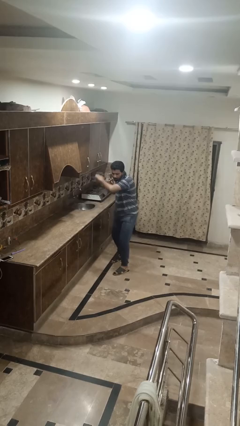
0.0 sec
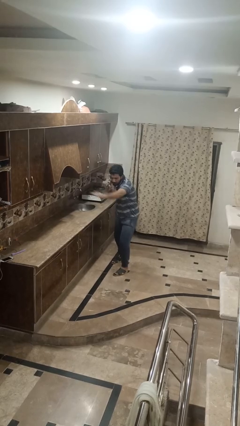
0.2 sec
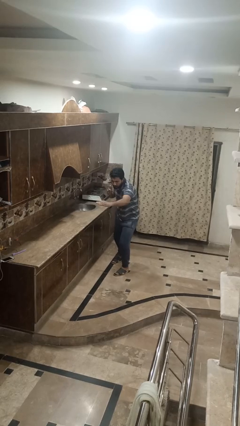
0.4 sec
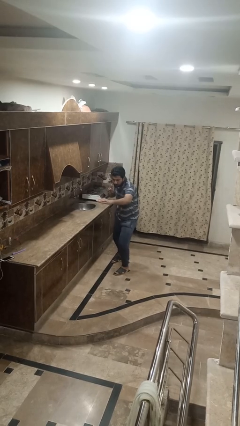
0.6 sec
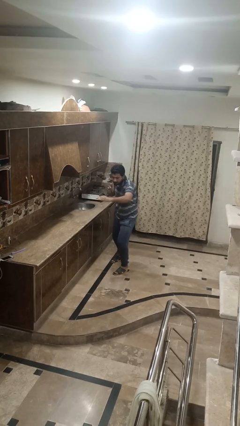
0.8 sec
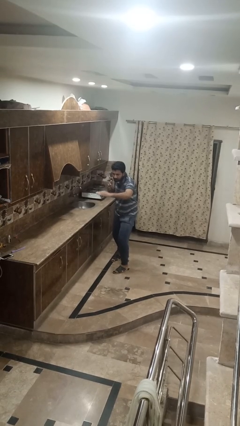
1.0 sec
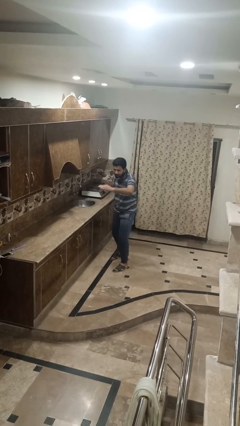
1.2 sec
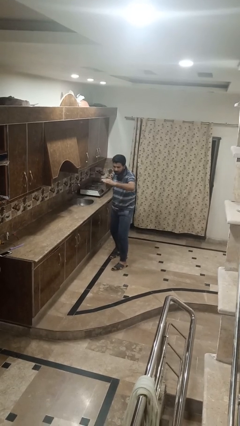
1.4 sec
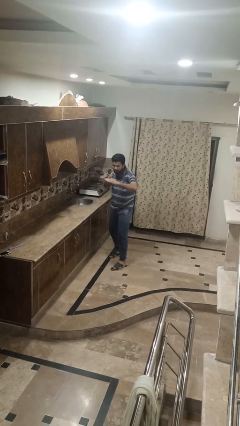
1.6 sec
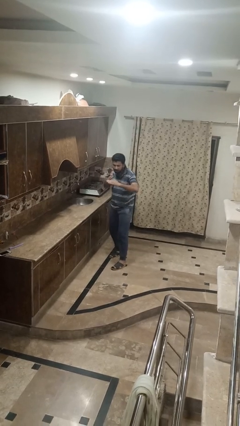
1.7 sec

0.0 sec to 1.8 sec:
person karate chop

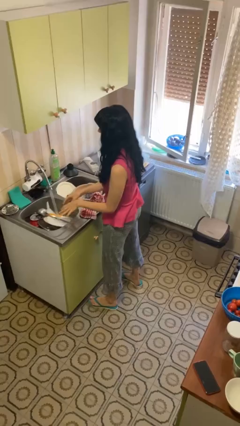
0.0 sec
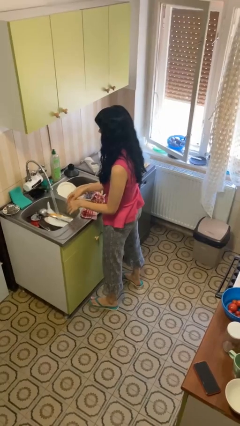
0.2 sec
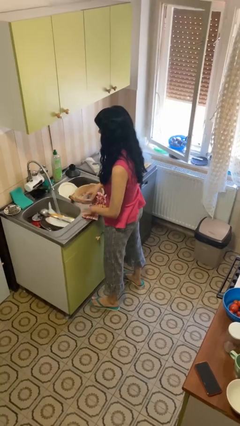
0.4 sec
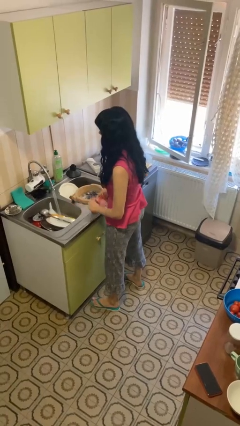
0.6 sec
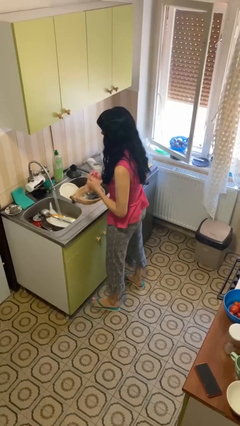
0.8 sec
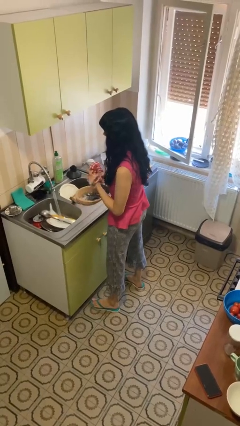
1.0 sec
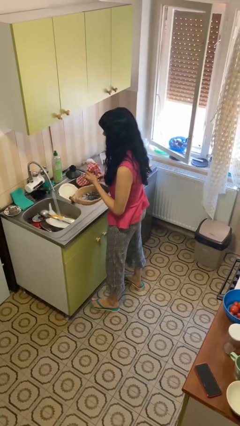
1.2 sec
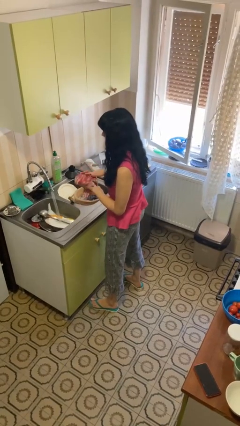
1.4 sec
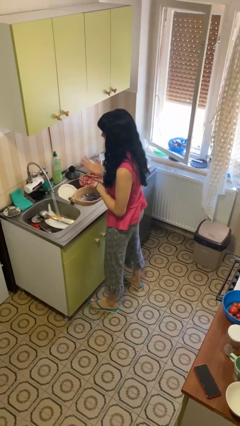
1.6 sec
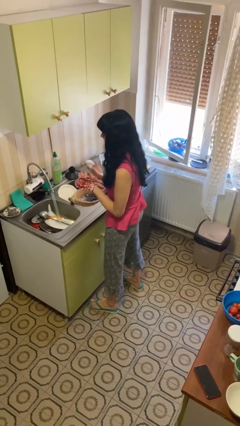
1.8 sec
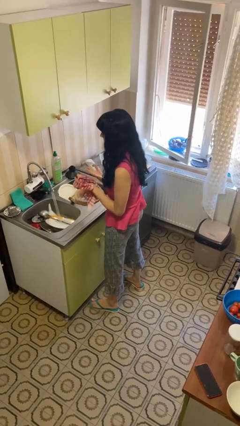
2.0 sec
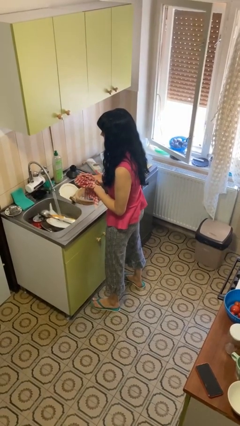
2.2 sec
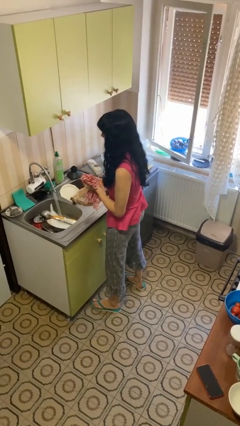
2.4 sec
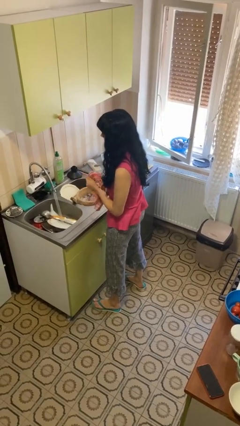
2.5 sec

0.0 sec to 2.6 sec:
person dries hands with towel

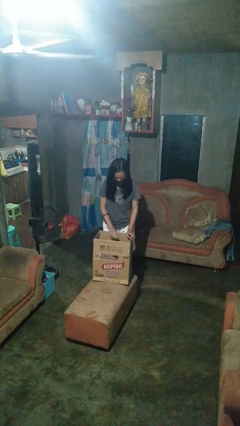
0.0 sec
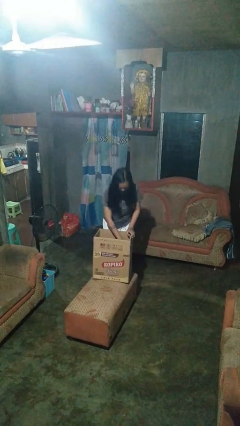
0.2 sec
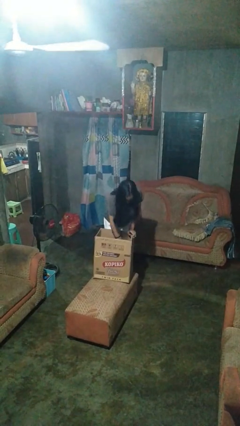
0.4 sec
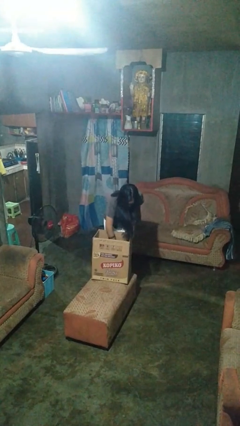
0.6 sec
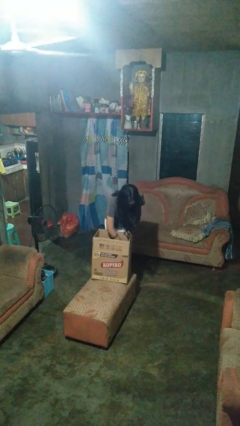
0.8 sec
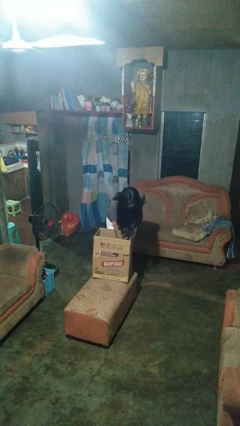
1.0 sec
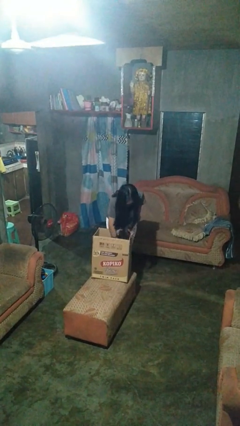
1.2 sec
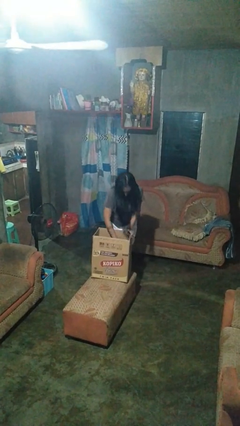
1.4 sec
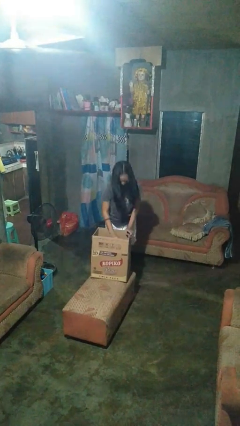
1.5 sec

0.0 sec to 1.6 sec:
person searches in box

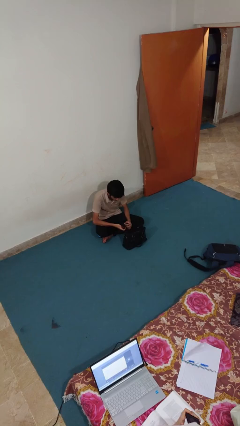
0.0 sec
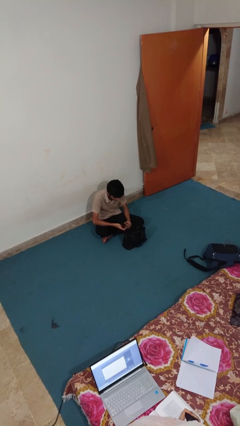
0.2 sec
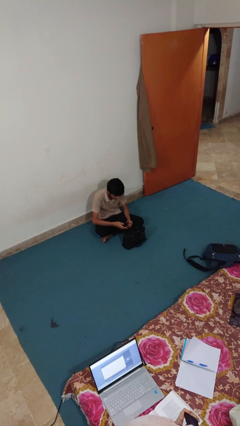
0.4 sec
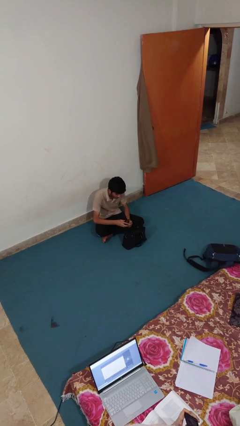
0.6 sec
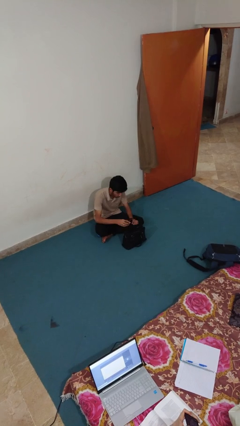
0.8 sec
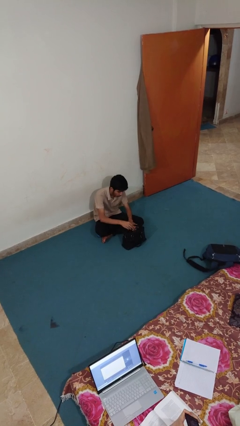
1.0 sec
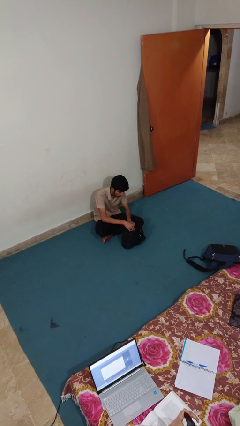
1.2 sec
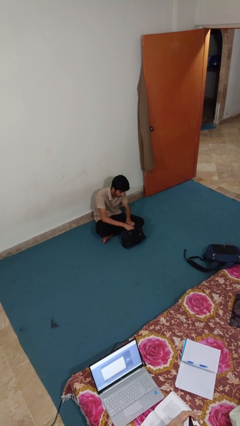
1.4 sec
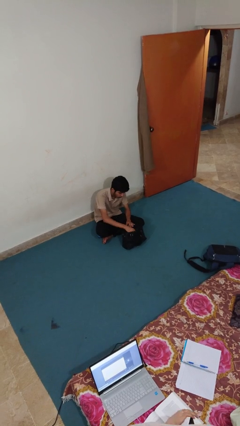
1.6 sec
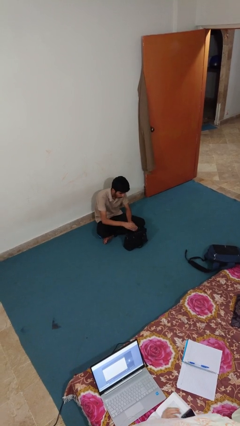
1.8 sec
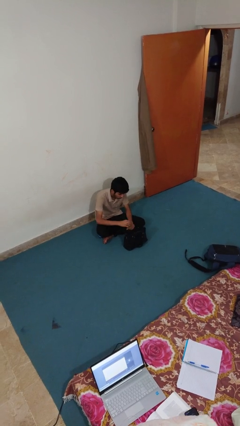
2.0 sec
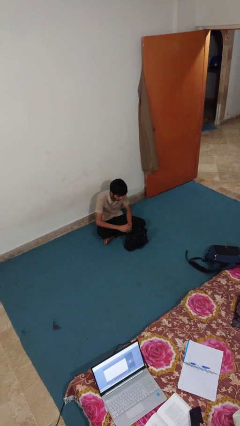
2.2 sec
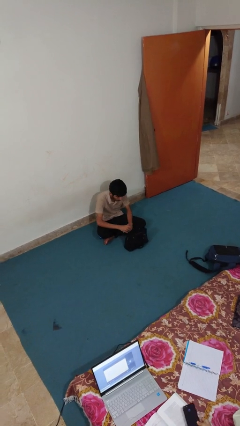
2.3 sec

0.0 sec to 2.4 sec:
person puts object into purse

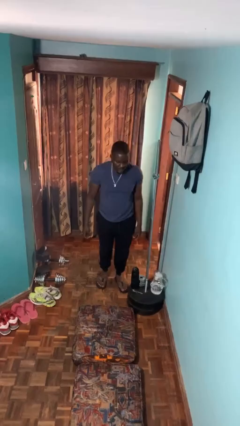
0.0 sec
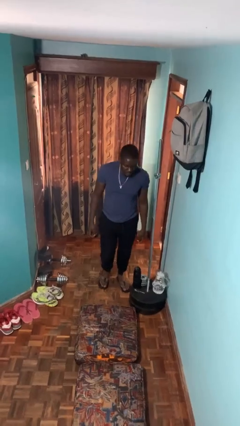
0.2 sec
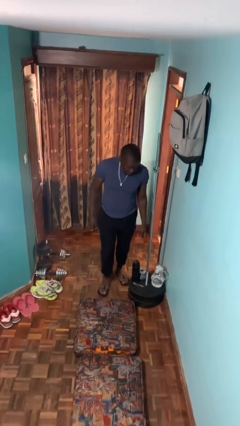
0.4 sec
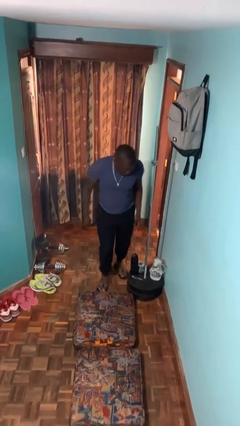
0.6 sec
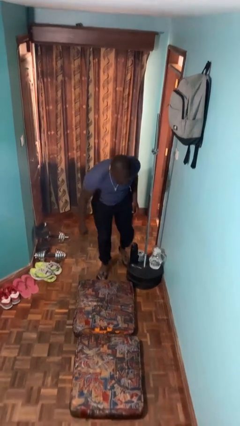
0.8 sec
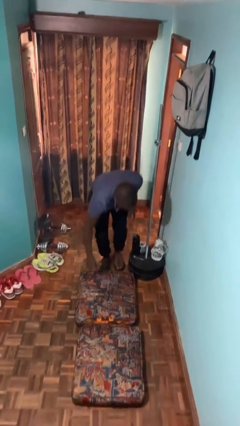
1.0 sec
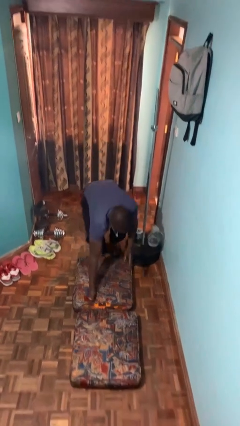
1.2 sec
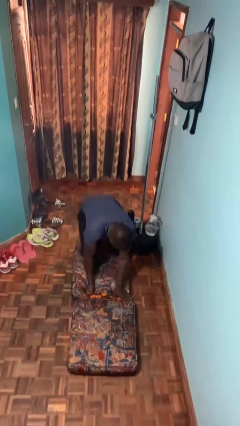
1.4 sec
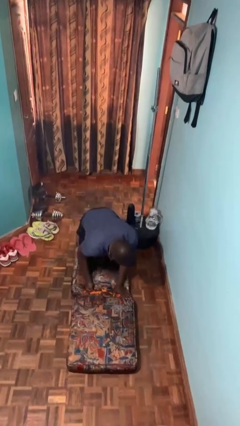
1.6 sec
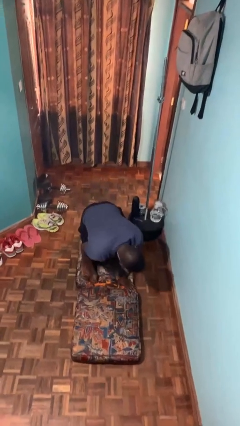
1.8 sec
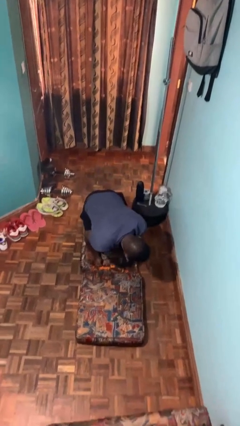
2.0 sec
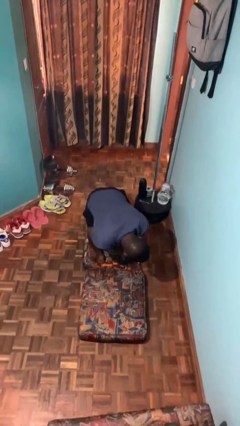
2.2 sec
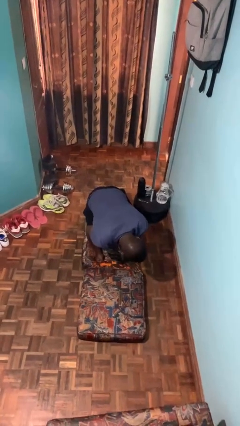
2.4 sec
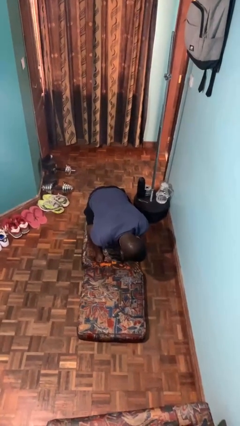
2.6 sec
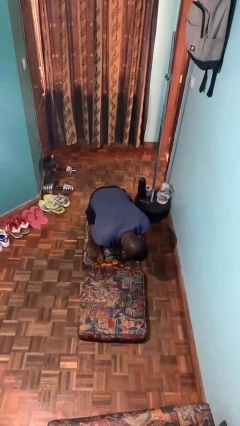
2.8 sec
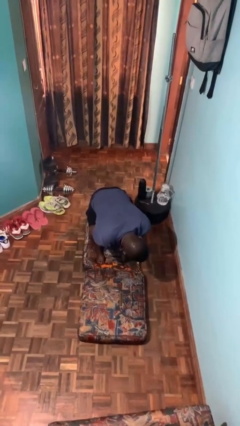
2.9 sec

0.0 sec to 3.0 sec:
person trips on object on floor

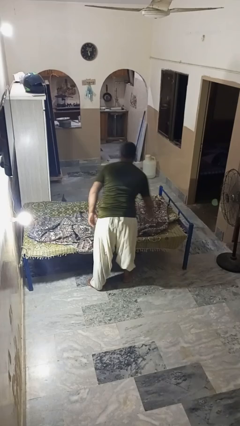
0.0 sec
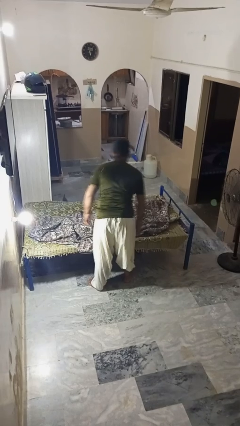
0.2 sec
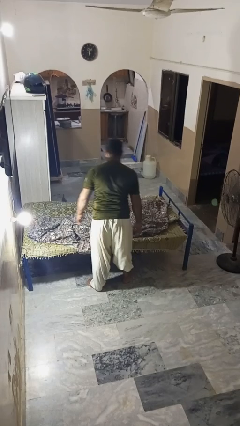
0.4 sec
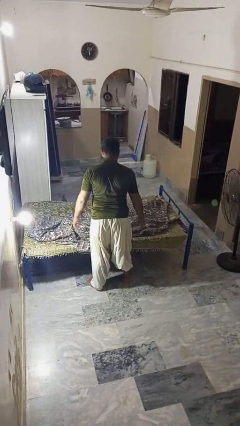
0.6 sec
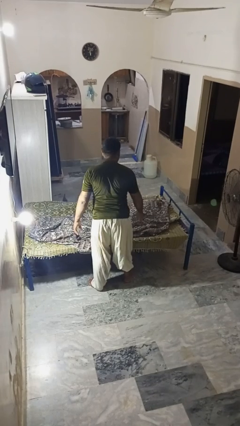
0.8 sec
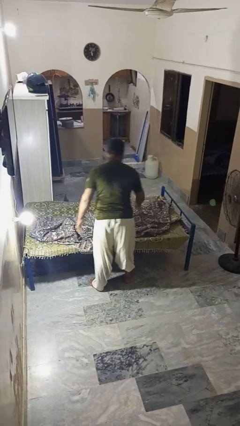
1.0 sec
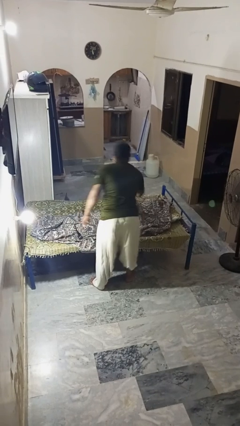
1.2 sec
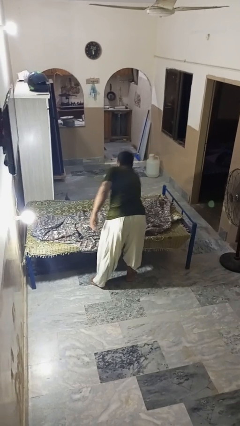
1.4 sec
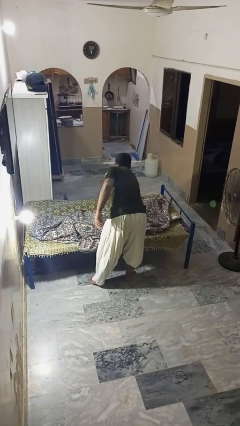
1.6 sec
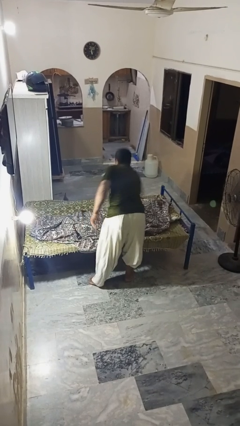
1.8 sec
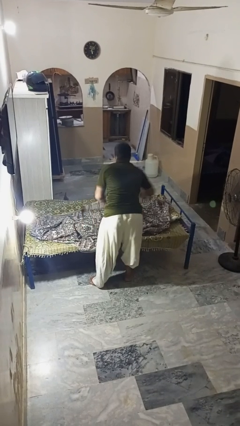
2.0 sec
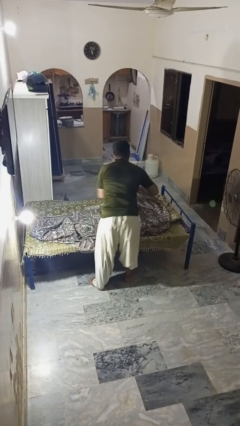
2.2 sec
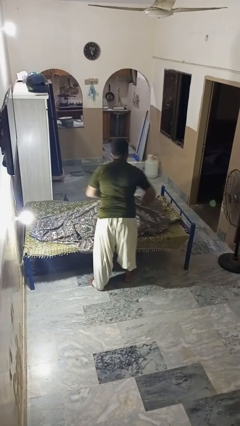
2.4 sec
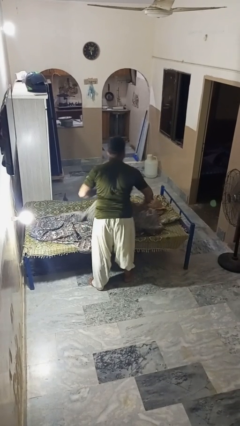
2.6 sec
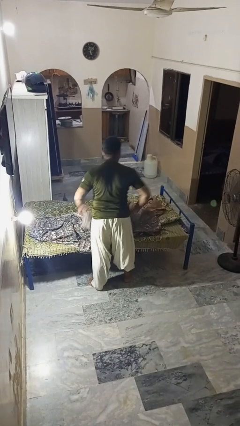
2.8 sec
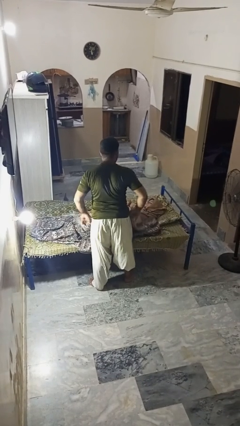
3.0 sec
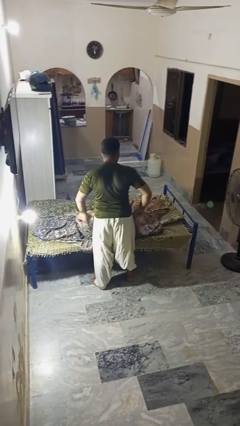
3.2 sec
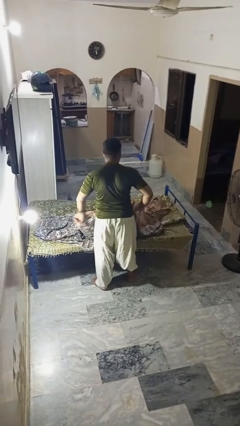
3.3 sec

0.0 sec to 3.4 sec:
person uncovers friend with blanket

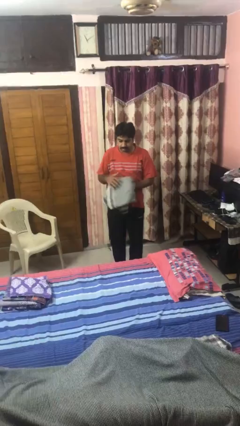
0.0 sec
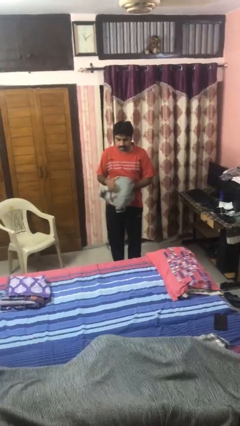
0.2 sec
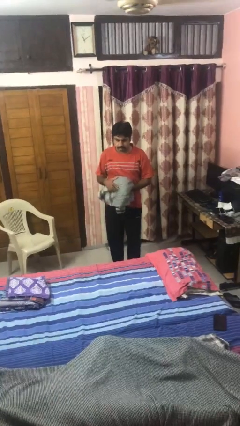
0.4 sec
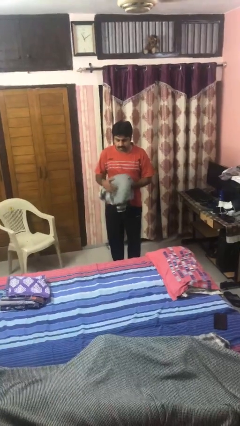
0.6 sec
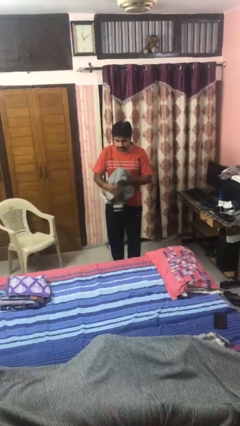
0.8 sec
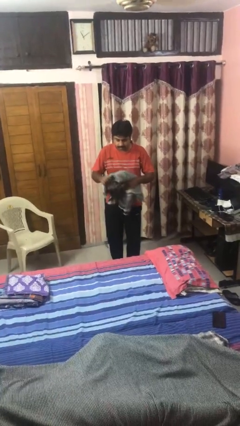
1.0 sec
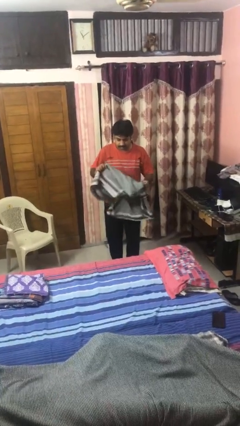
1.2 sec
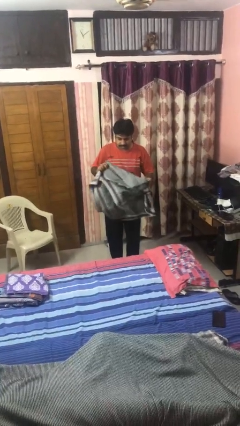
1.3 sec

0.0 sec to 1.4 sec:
person unfolds blanket

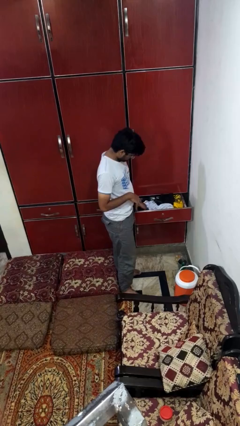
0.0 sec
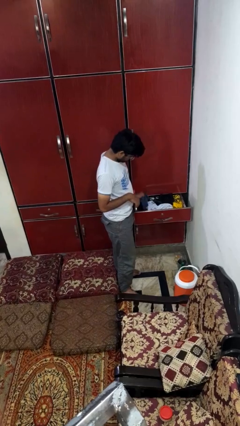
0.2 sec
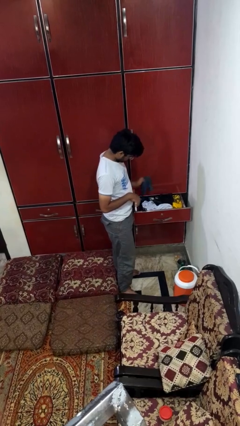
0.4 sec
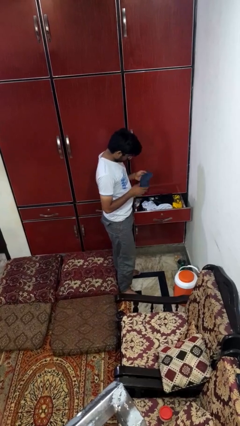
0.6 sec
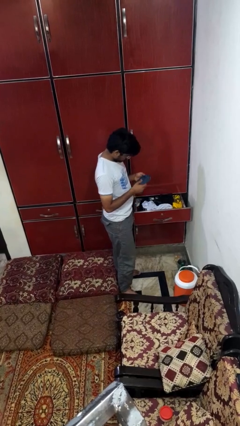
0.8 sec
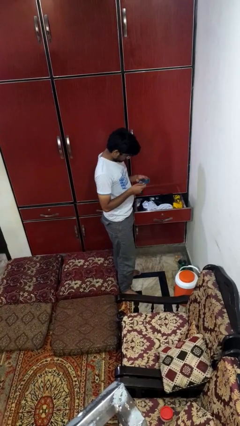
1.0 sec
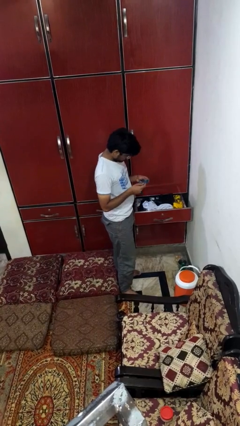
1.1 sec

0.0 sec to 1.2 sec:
person takes clothes from dresser
